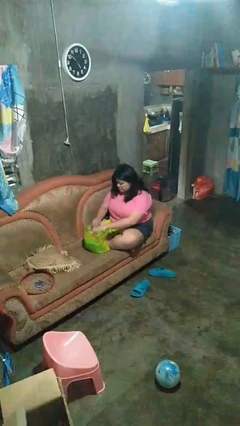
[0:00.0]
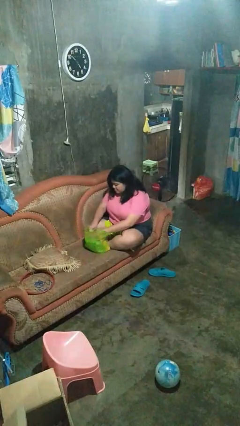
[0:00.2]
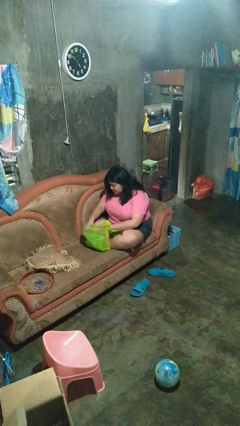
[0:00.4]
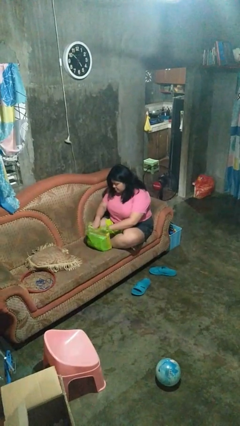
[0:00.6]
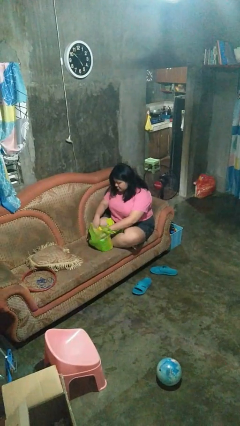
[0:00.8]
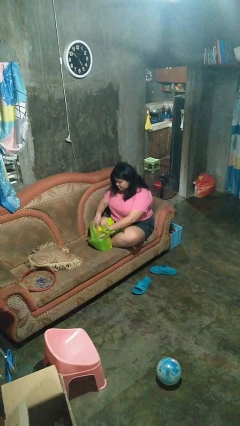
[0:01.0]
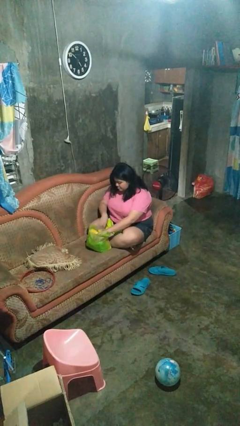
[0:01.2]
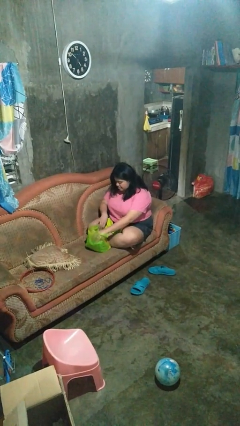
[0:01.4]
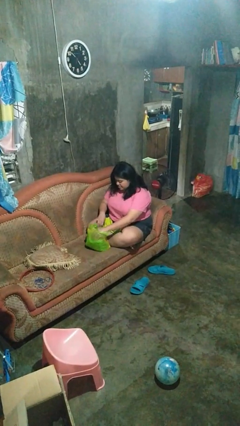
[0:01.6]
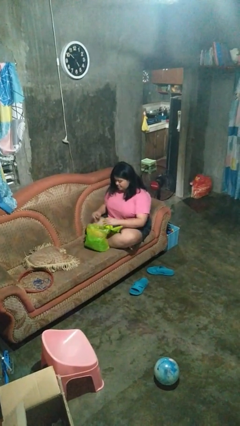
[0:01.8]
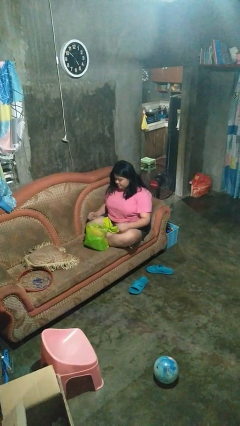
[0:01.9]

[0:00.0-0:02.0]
person searches in bag

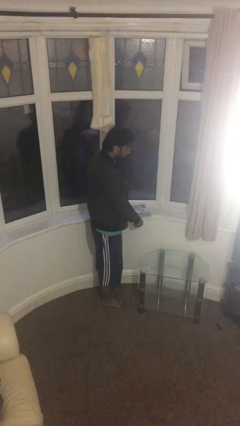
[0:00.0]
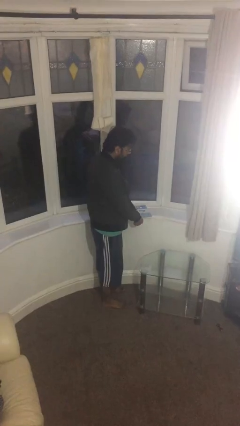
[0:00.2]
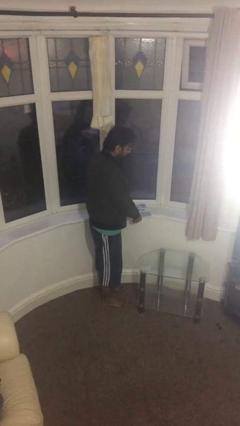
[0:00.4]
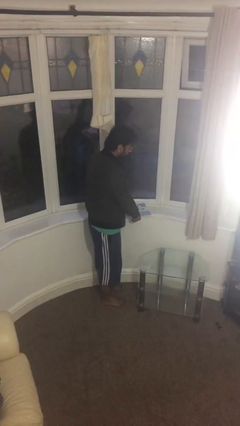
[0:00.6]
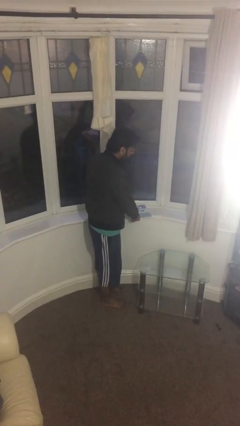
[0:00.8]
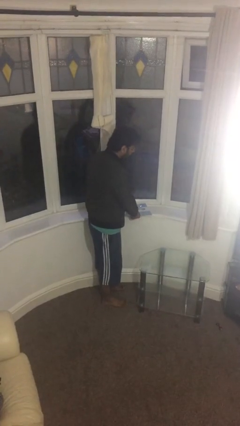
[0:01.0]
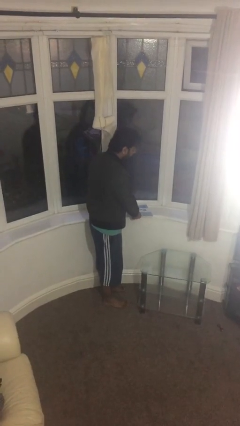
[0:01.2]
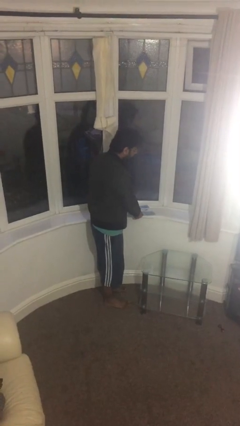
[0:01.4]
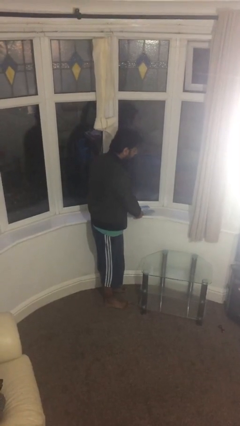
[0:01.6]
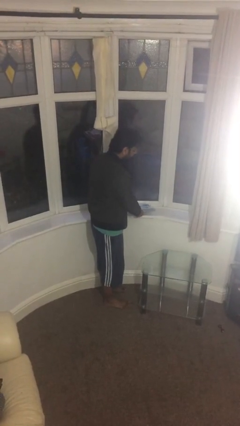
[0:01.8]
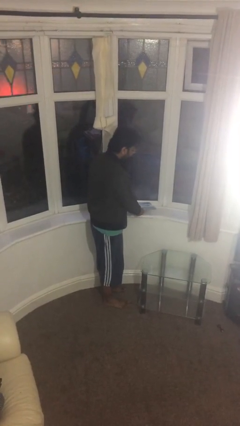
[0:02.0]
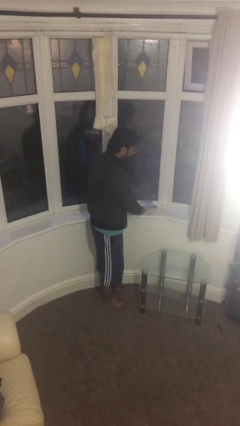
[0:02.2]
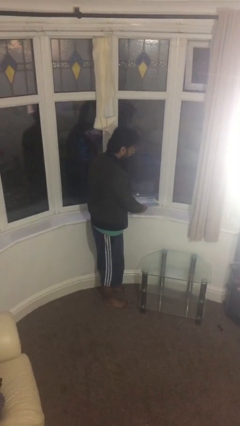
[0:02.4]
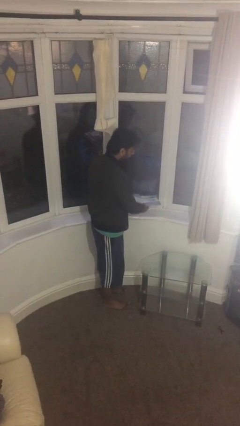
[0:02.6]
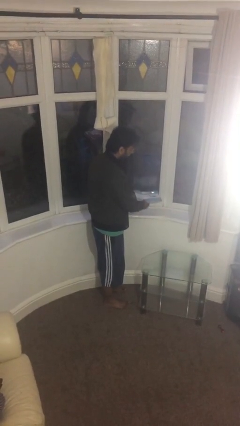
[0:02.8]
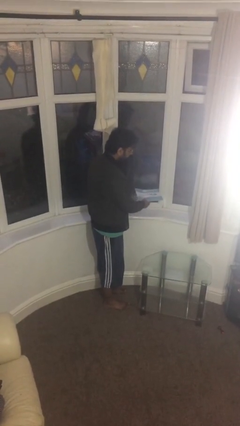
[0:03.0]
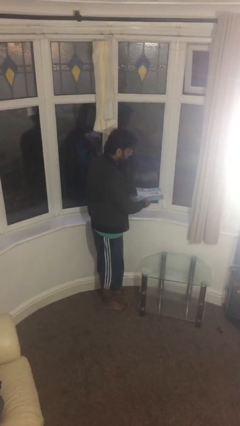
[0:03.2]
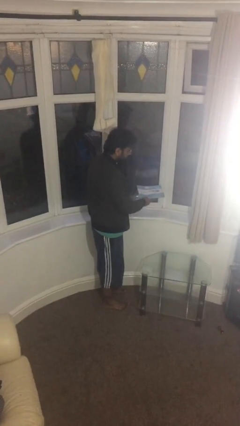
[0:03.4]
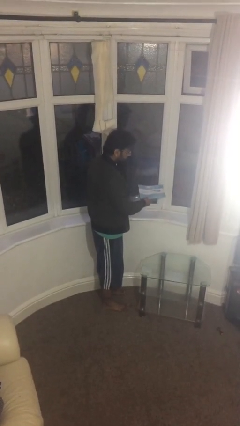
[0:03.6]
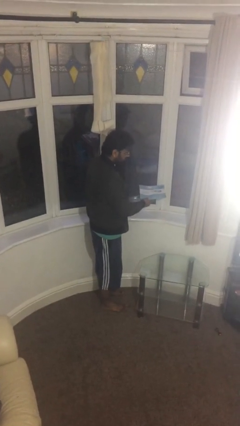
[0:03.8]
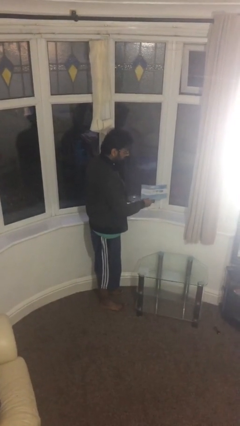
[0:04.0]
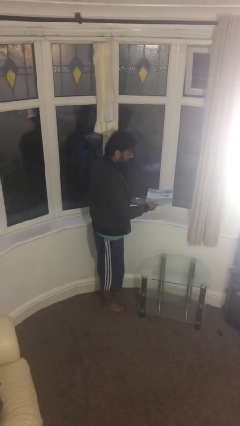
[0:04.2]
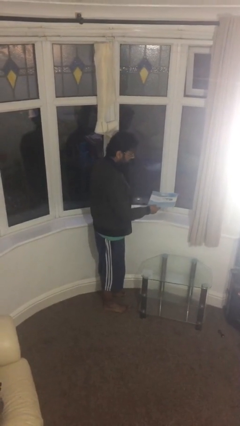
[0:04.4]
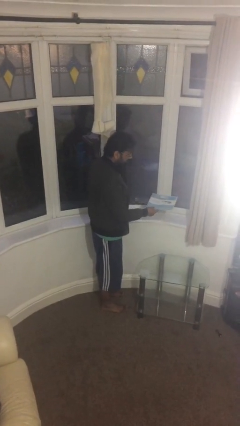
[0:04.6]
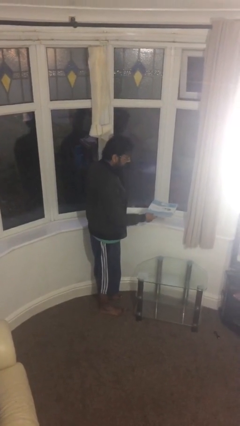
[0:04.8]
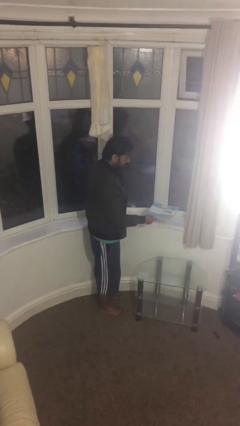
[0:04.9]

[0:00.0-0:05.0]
person picks up object from shelf

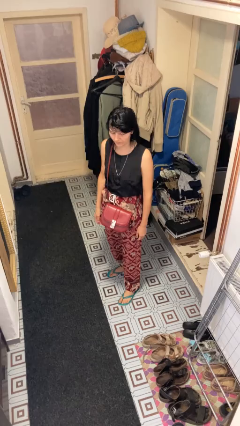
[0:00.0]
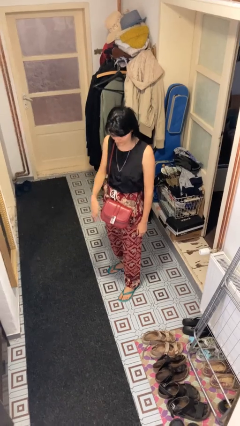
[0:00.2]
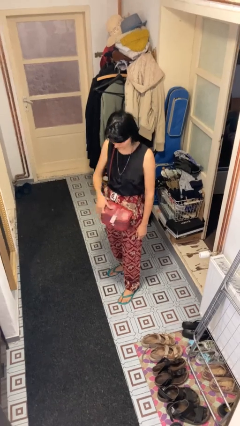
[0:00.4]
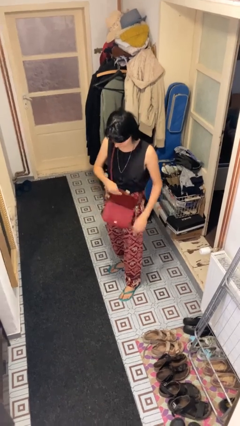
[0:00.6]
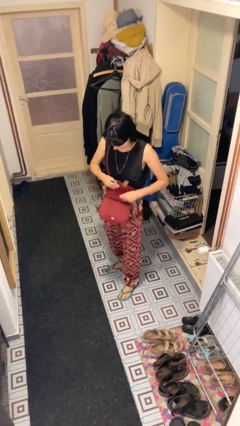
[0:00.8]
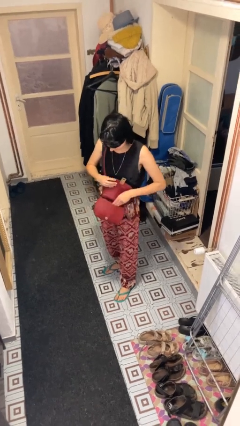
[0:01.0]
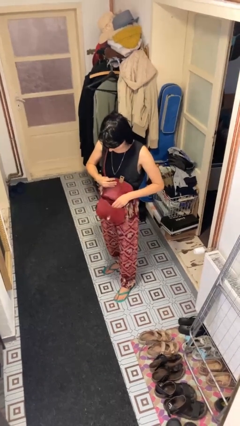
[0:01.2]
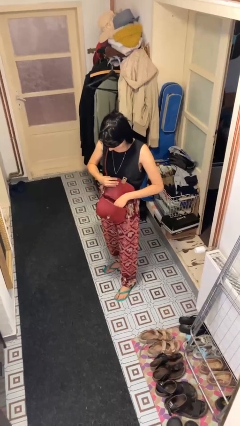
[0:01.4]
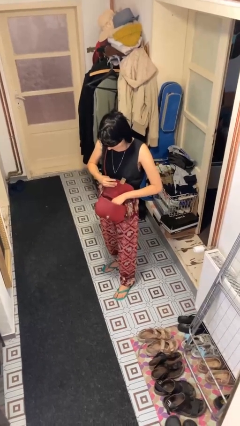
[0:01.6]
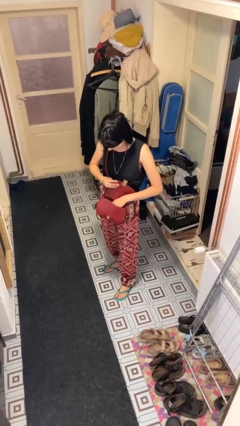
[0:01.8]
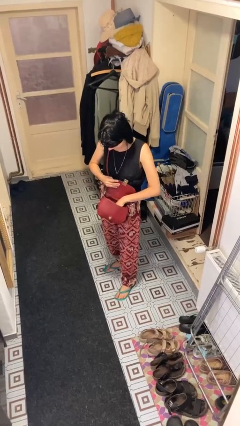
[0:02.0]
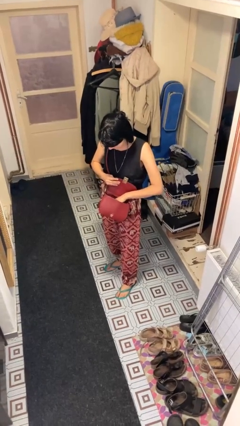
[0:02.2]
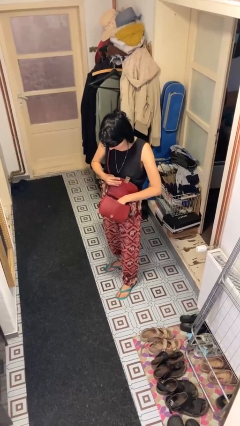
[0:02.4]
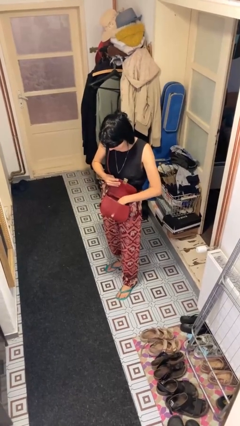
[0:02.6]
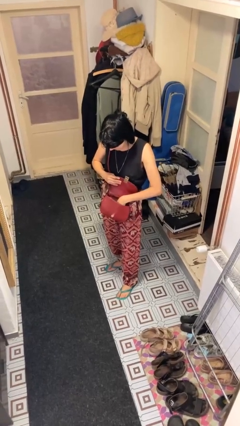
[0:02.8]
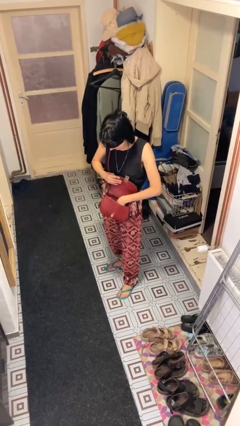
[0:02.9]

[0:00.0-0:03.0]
person searches in purse

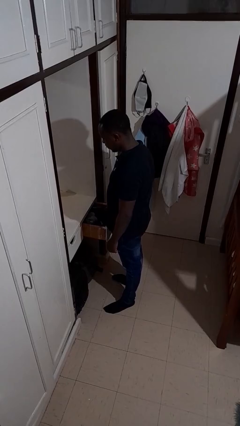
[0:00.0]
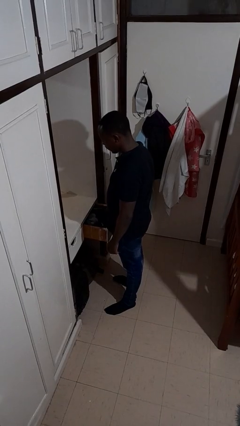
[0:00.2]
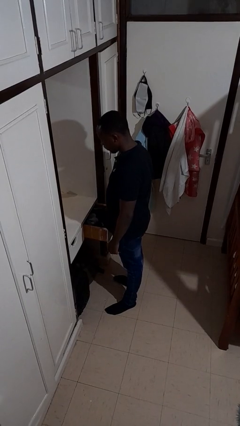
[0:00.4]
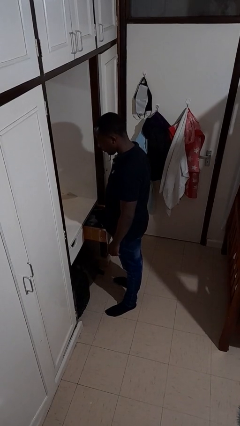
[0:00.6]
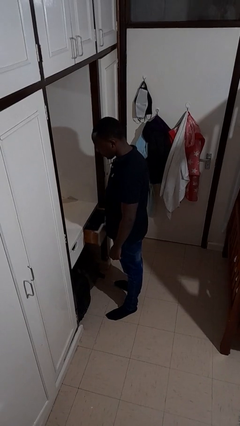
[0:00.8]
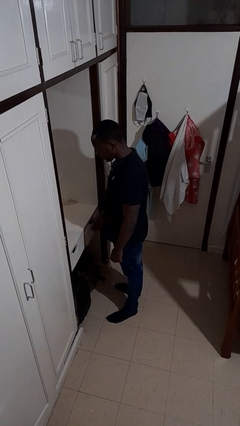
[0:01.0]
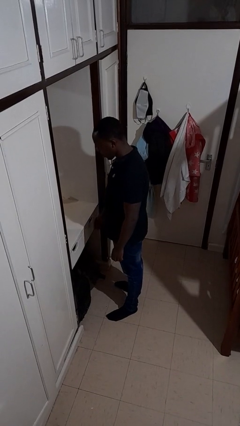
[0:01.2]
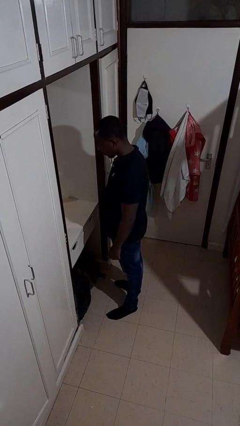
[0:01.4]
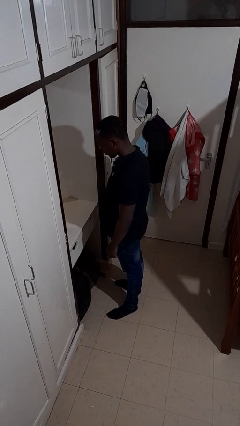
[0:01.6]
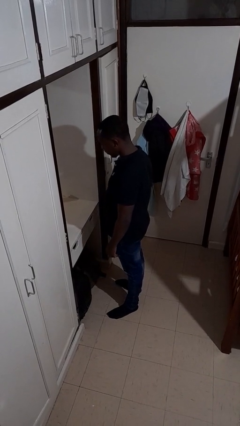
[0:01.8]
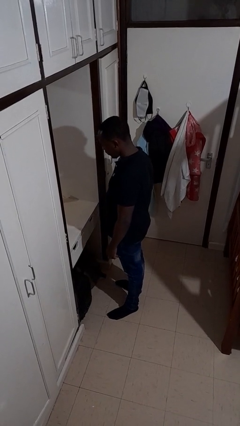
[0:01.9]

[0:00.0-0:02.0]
person closes dresser drawer

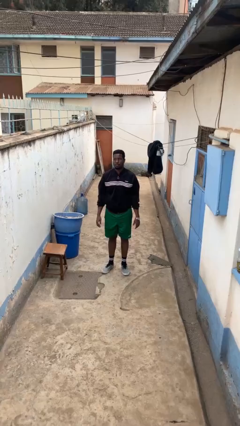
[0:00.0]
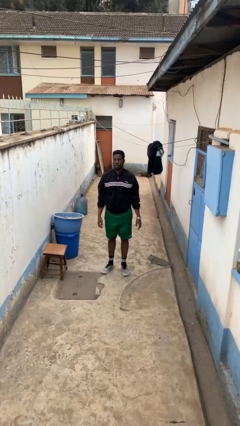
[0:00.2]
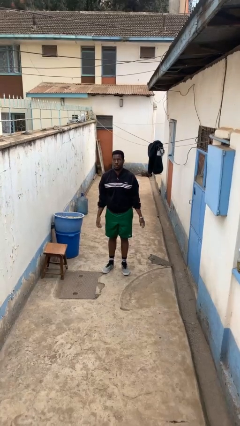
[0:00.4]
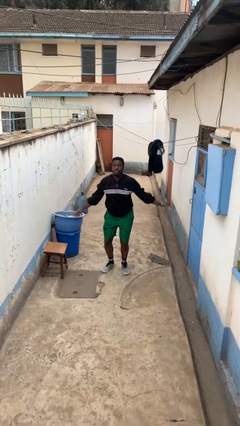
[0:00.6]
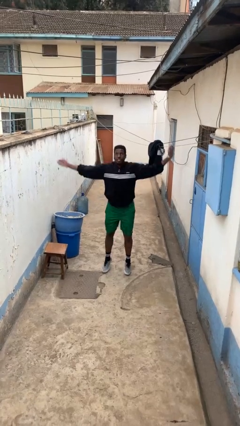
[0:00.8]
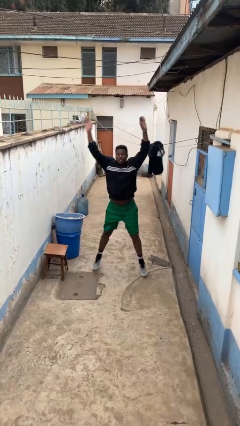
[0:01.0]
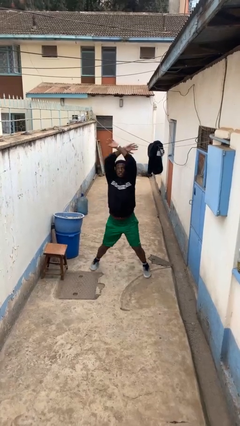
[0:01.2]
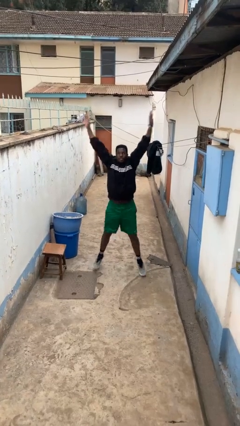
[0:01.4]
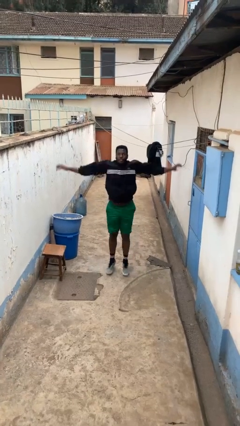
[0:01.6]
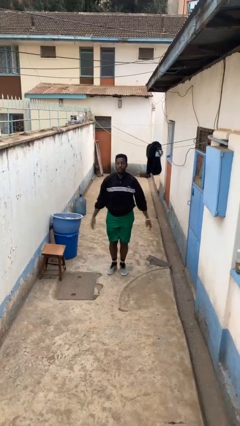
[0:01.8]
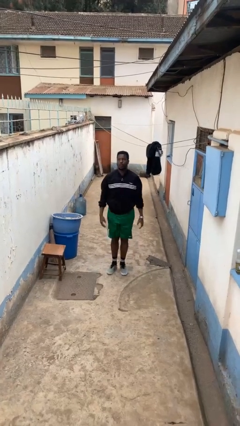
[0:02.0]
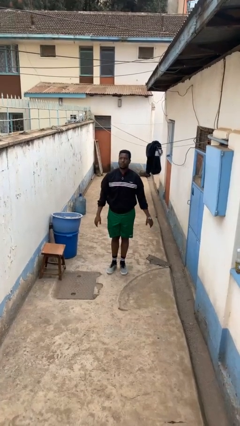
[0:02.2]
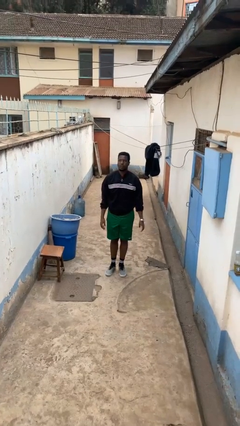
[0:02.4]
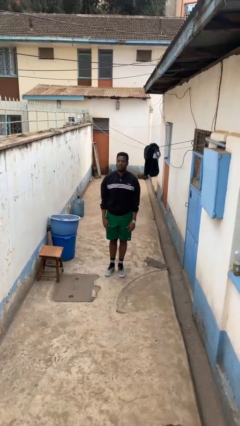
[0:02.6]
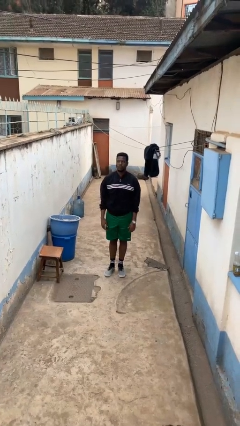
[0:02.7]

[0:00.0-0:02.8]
person exercises with jumping jacks

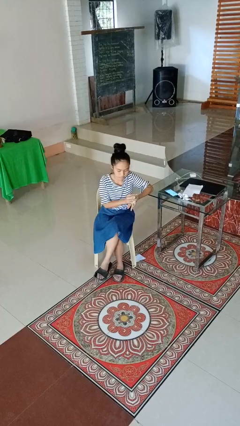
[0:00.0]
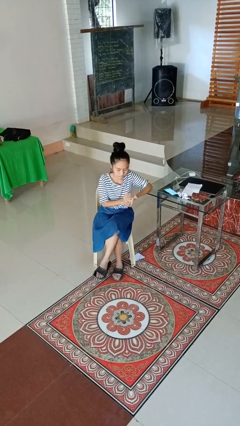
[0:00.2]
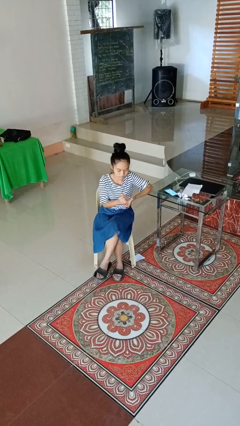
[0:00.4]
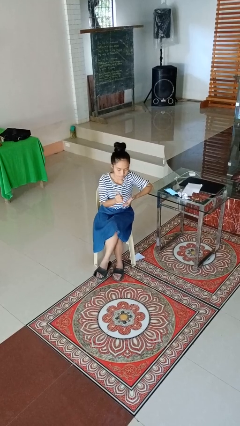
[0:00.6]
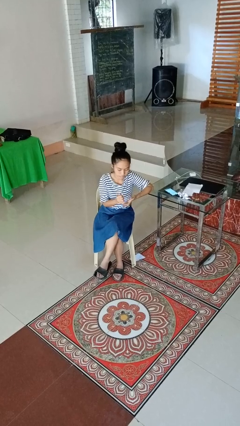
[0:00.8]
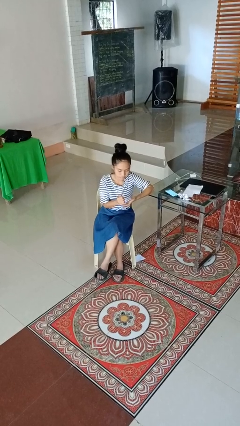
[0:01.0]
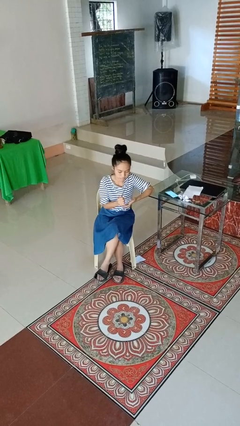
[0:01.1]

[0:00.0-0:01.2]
person crumples paper

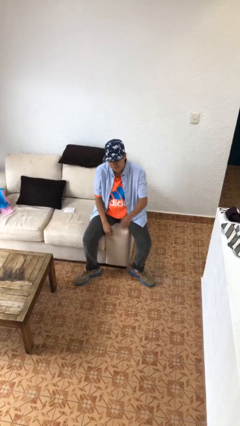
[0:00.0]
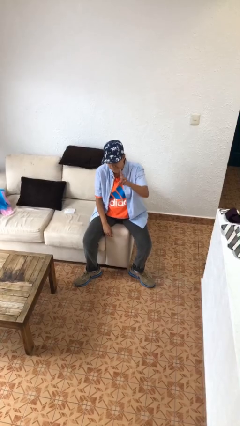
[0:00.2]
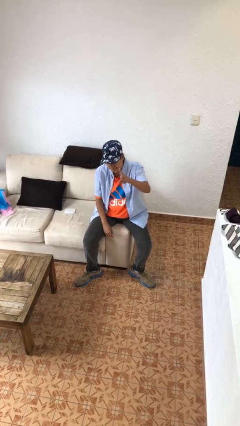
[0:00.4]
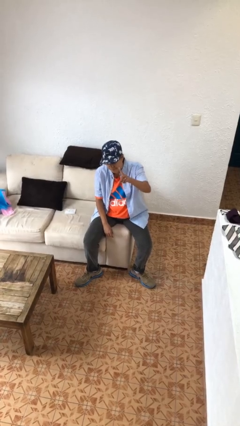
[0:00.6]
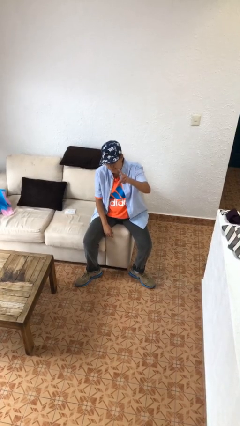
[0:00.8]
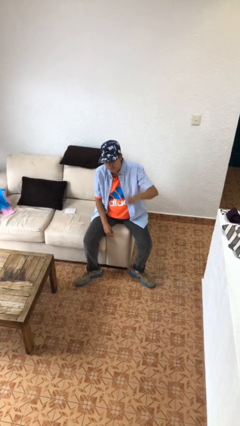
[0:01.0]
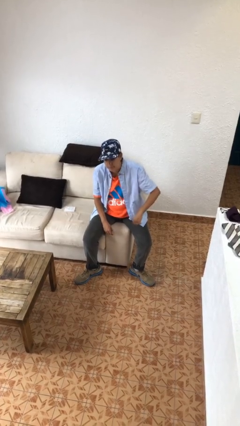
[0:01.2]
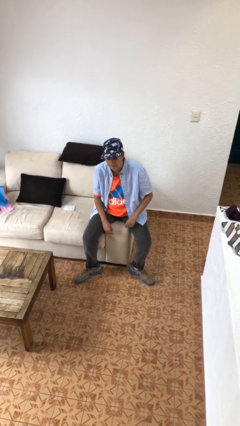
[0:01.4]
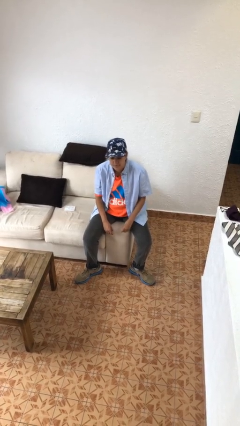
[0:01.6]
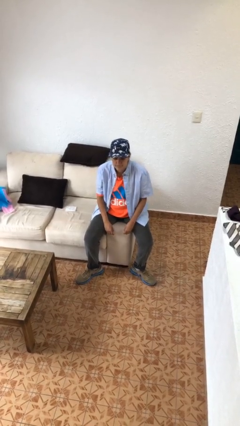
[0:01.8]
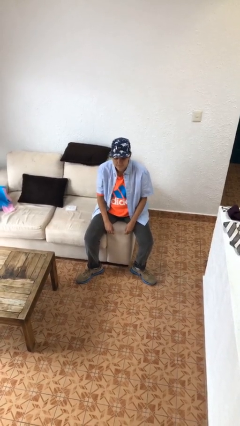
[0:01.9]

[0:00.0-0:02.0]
person gestures number one
